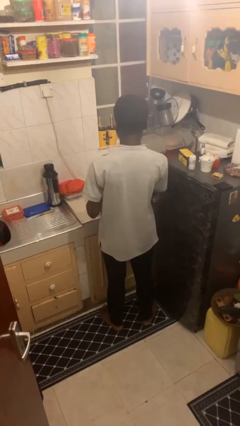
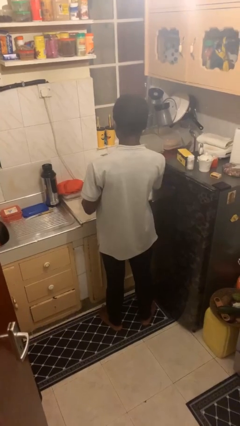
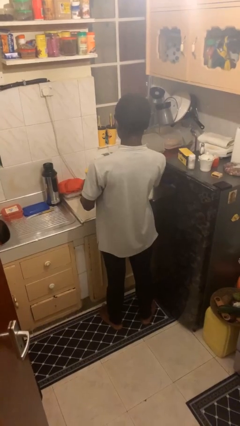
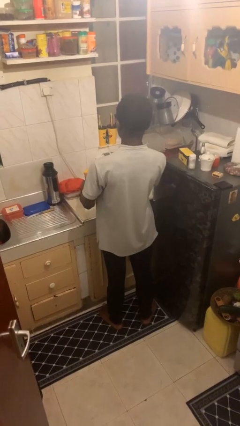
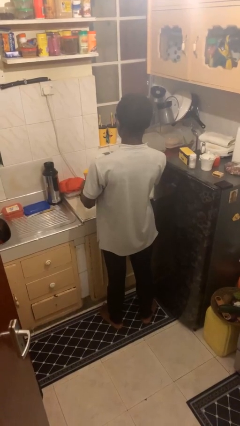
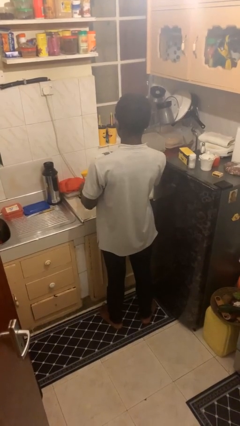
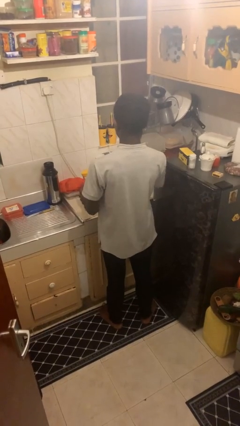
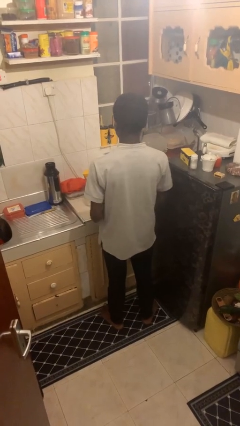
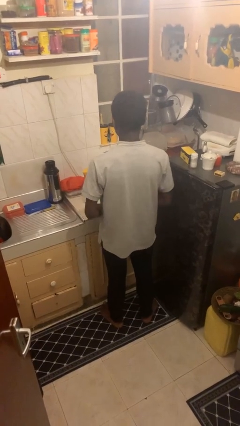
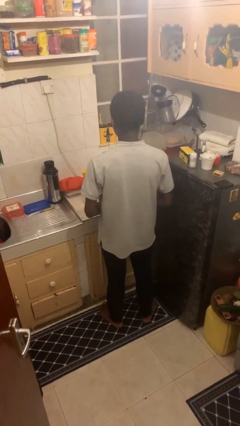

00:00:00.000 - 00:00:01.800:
person puts down object on countertop

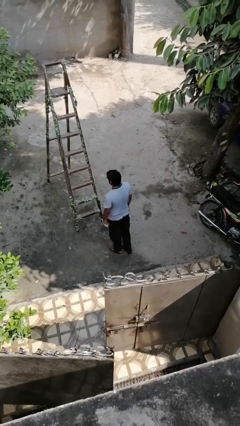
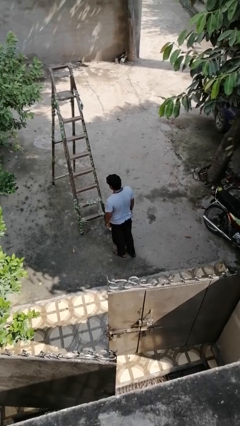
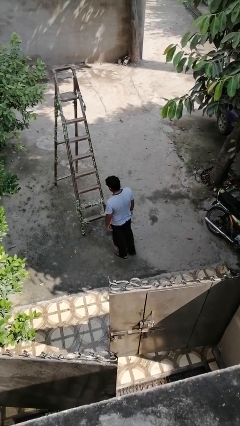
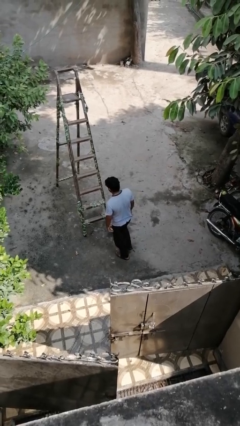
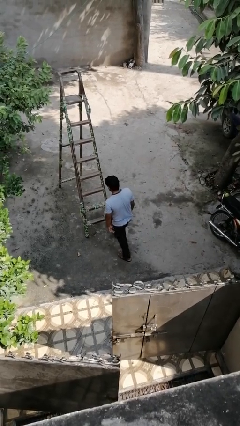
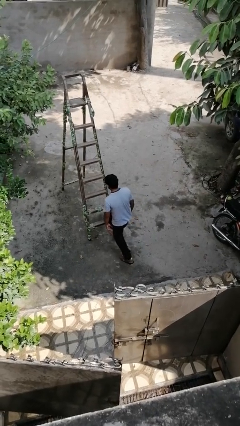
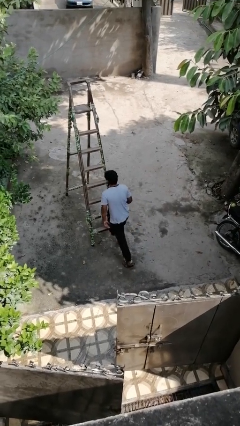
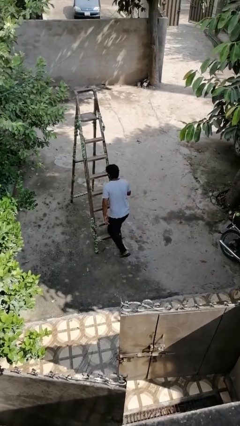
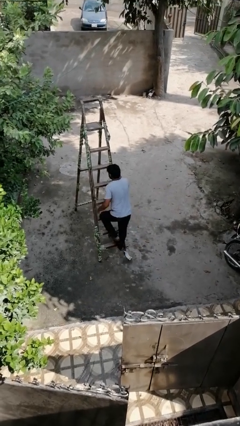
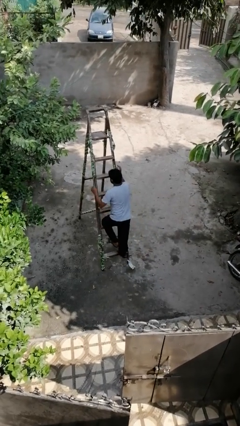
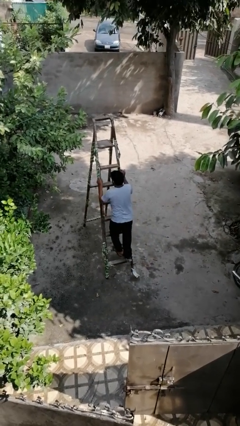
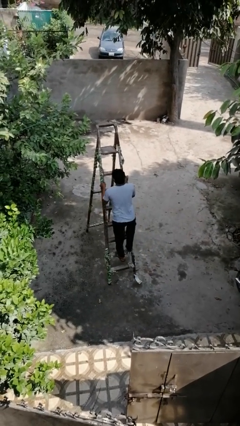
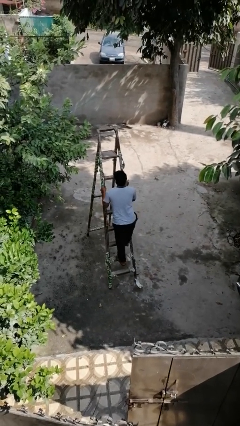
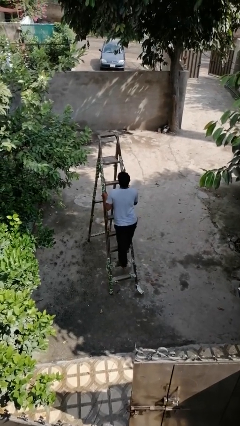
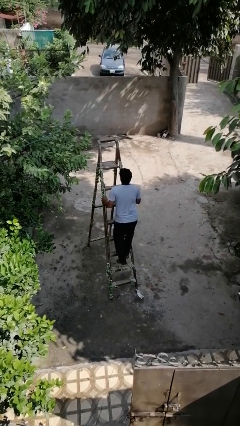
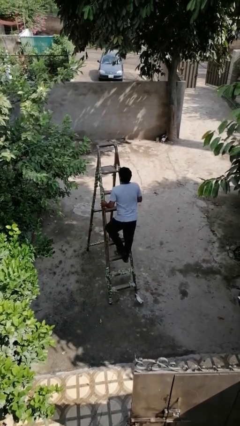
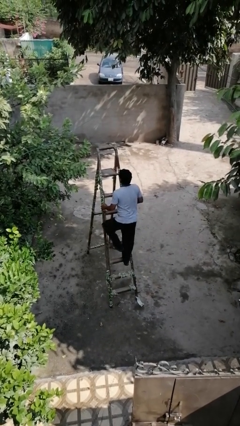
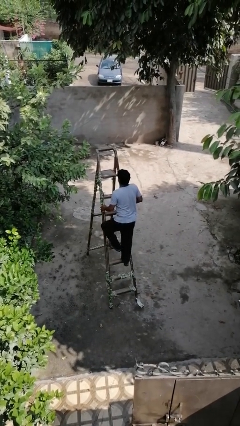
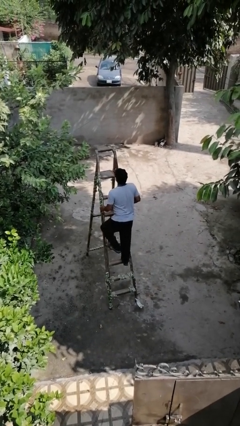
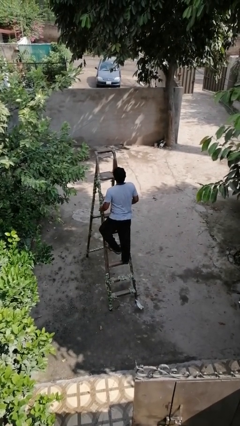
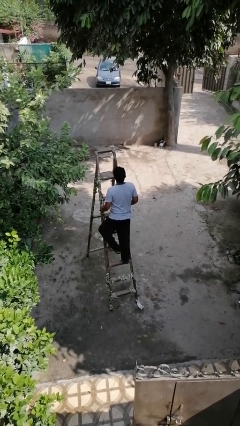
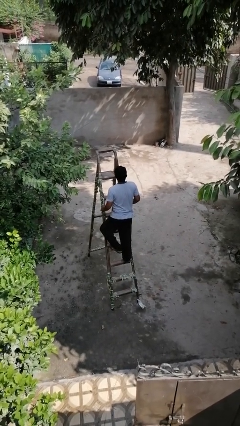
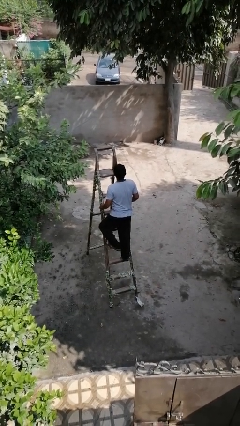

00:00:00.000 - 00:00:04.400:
person climbs up ladder

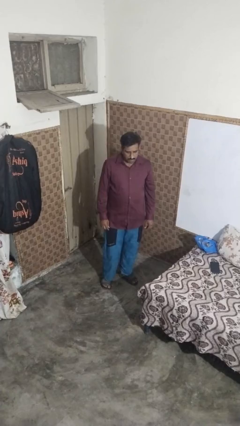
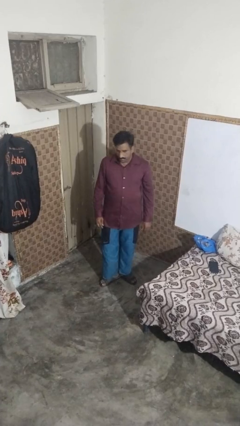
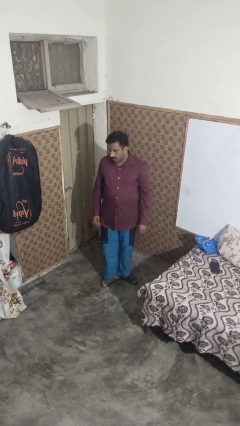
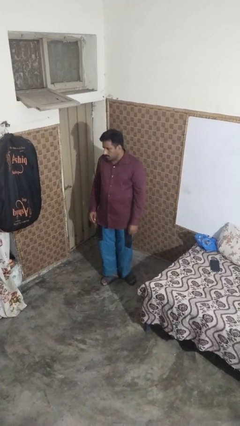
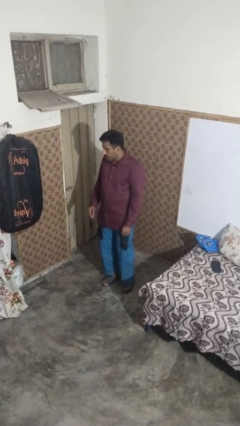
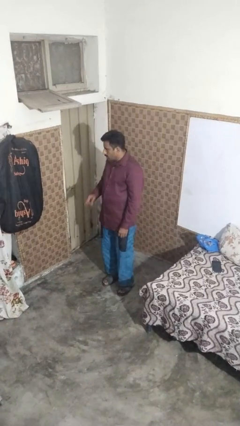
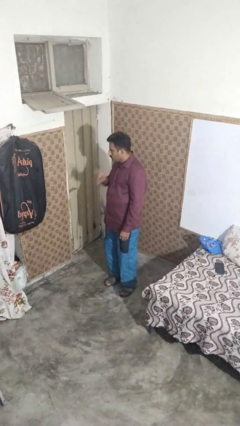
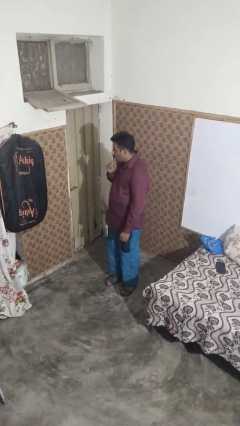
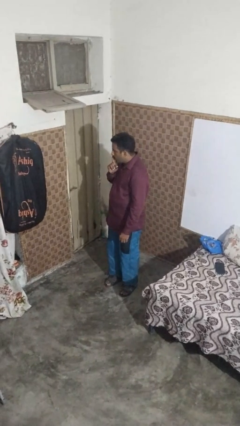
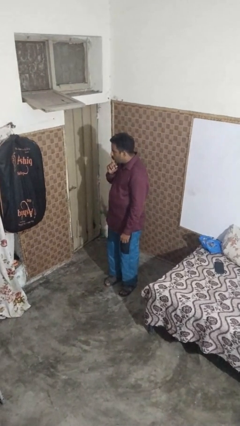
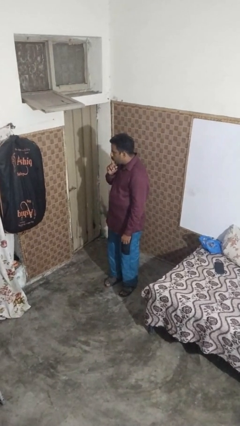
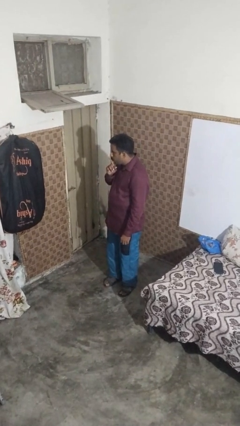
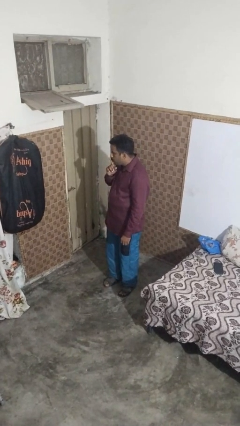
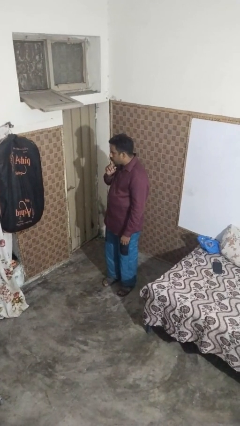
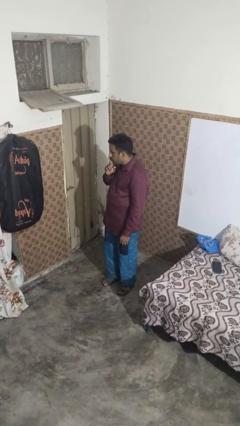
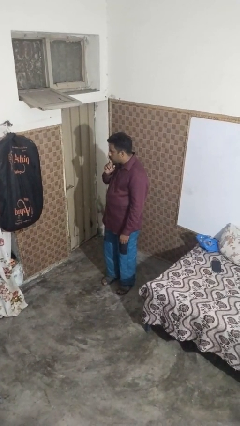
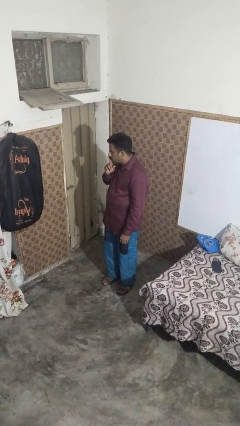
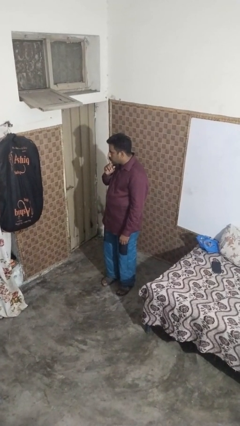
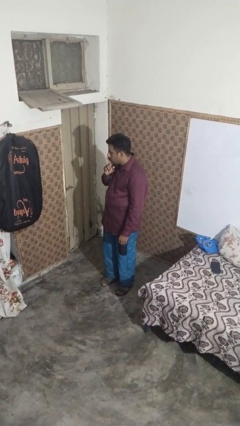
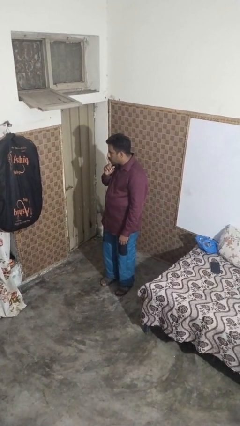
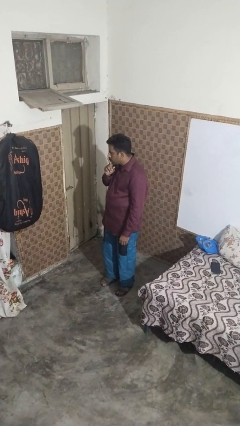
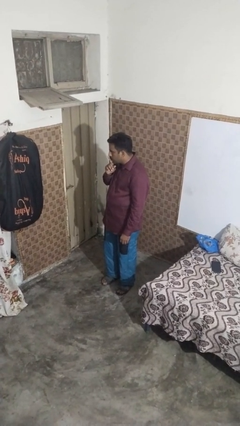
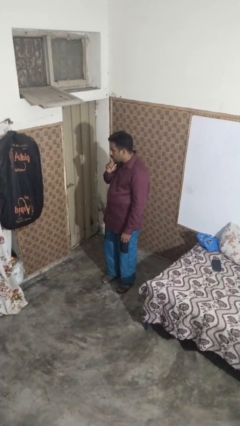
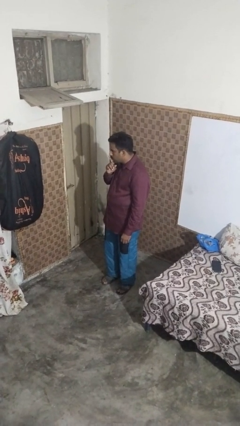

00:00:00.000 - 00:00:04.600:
person gestures be quiet

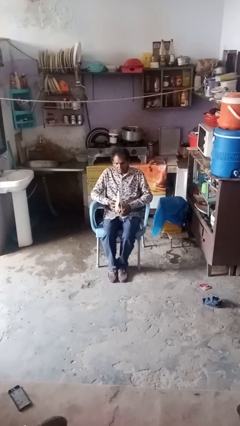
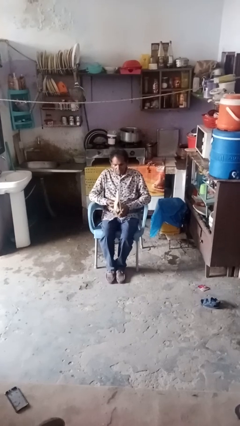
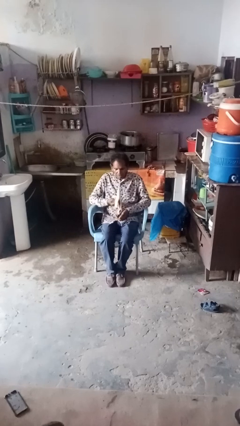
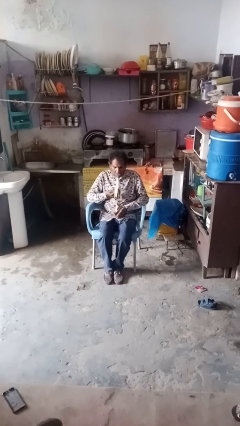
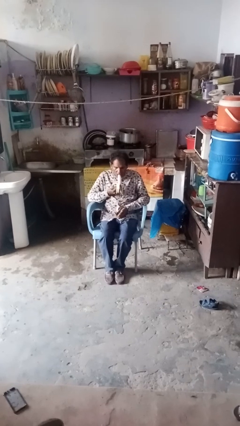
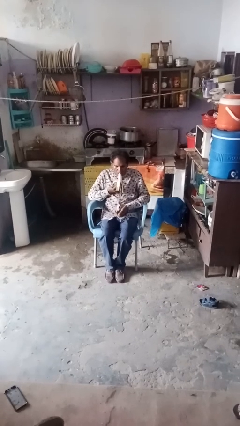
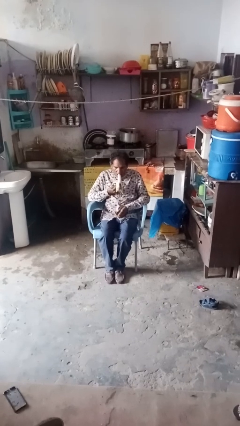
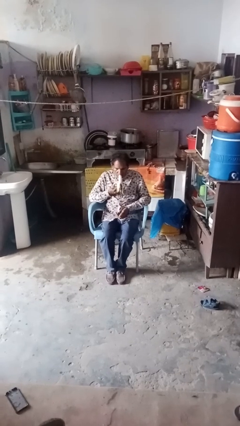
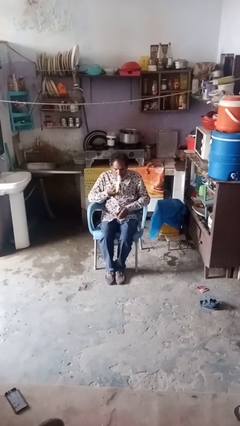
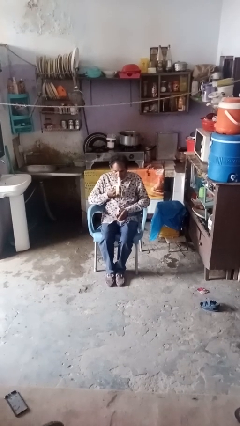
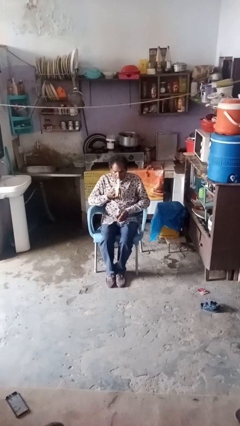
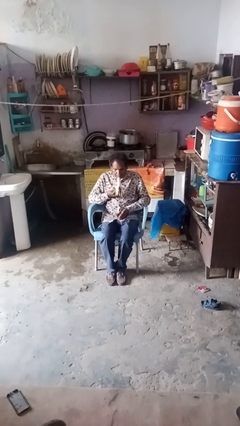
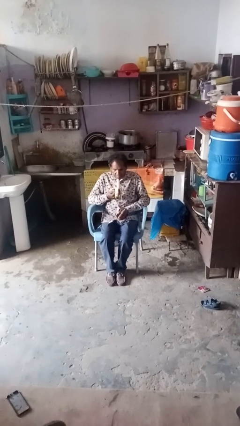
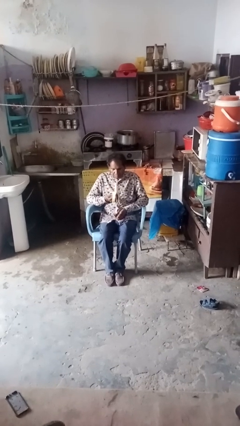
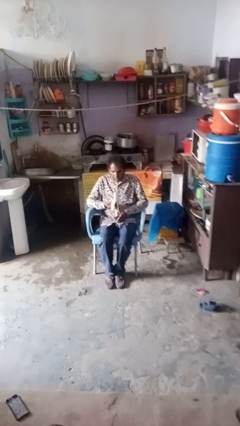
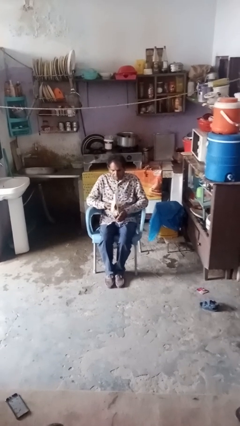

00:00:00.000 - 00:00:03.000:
person eats banana

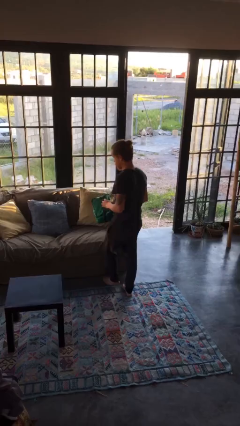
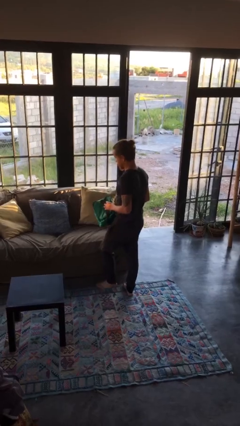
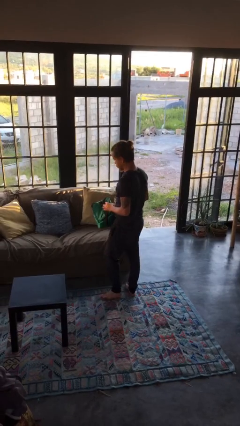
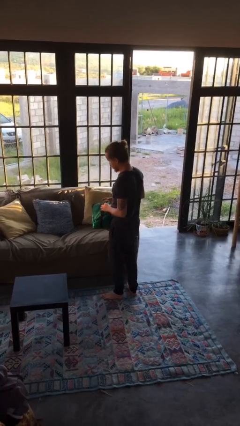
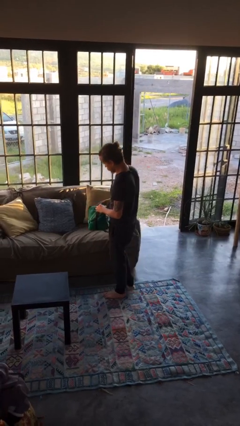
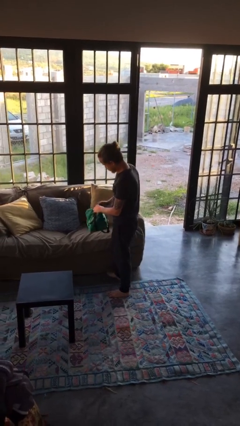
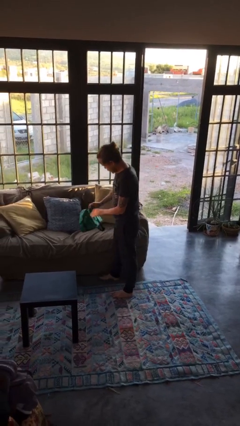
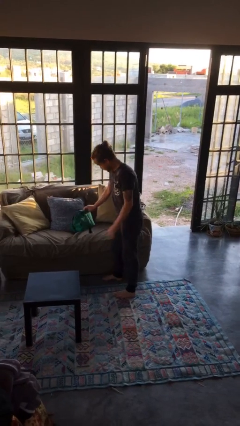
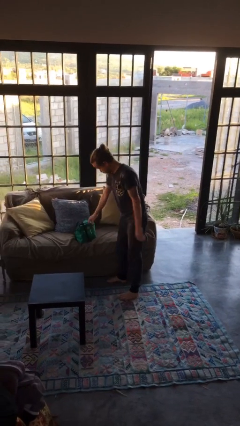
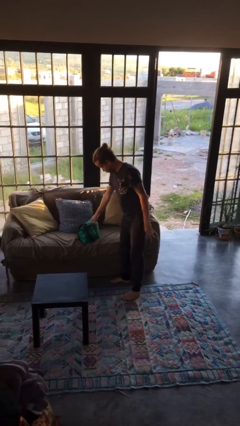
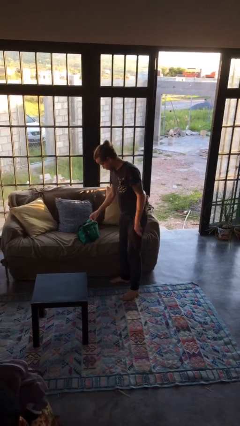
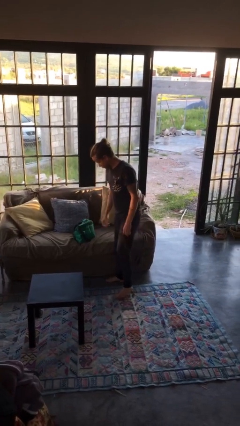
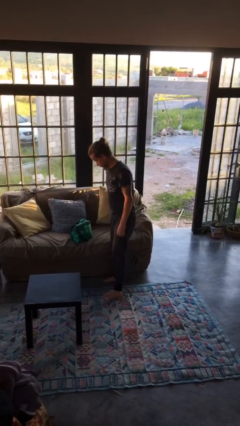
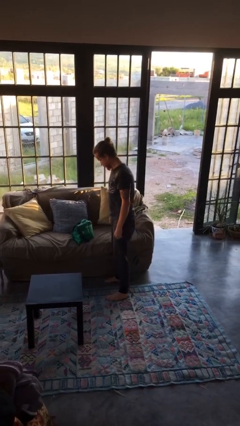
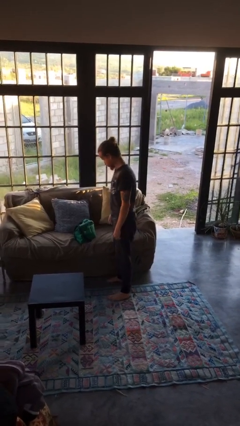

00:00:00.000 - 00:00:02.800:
person puts down object on couch

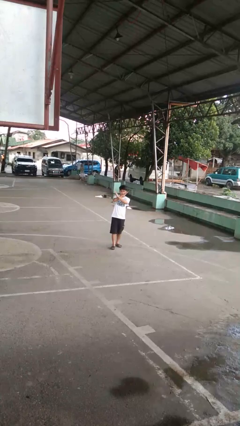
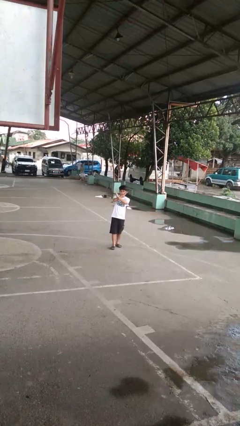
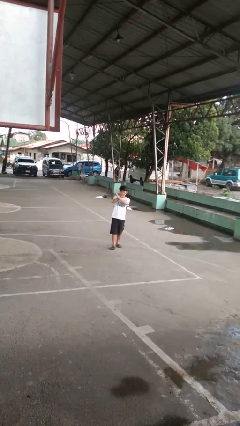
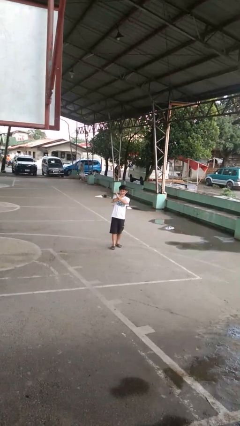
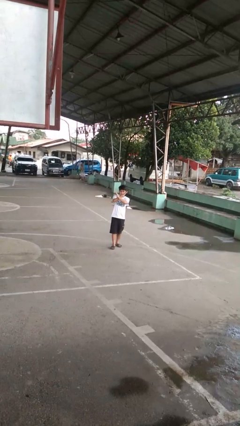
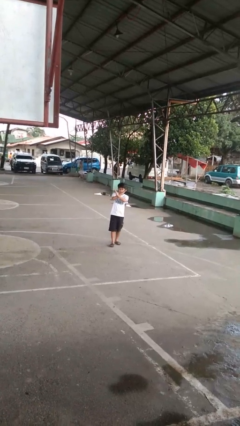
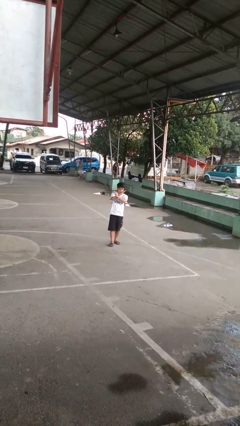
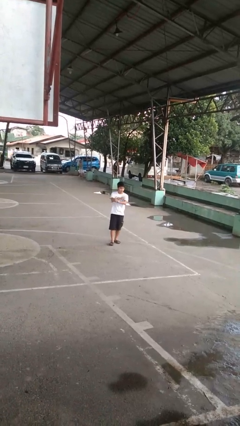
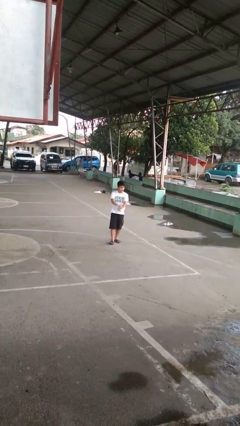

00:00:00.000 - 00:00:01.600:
person gestures arms x
